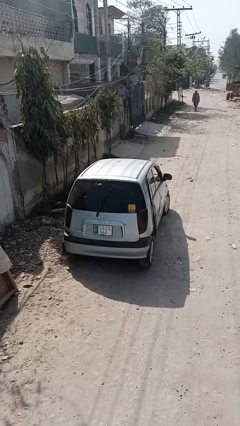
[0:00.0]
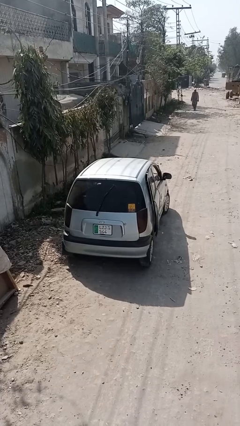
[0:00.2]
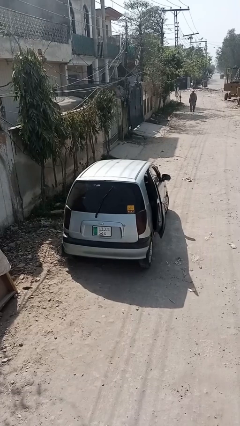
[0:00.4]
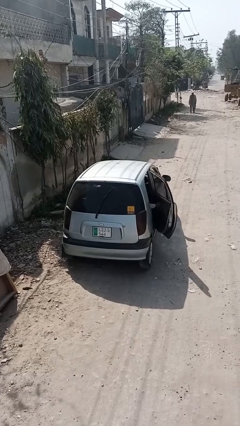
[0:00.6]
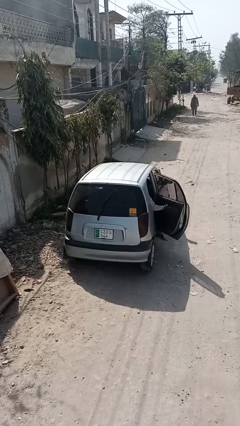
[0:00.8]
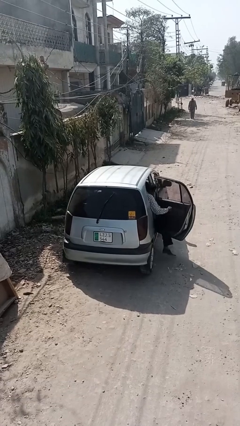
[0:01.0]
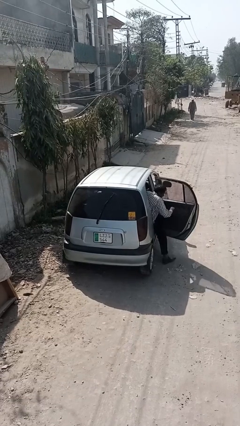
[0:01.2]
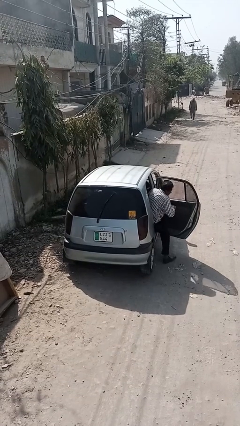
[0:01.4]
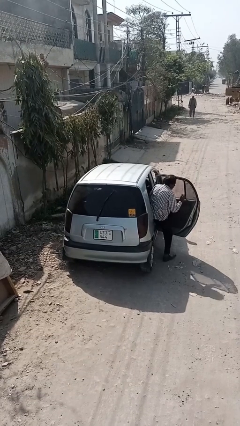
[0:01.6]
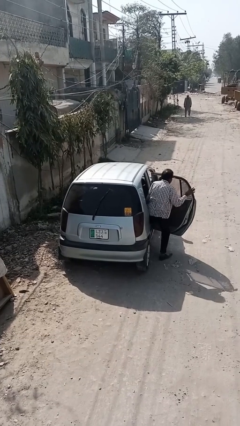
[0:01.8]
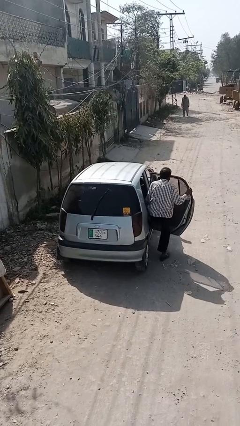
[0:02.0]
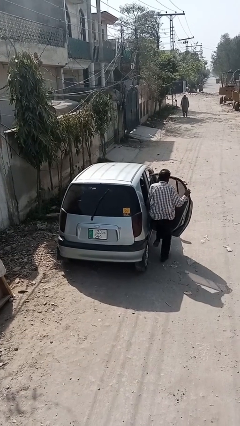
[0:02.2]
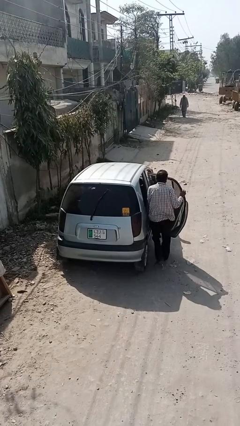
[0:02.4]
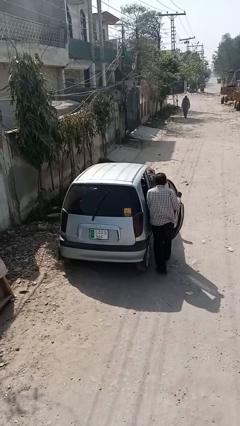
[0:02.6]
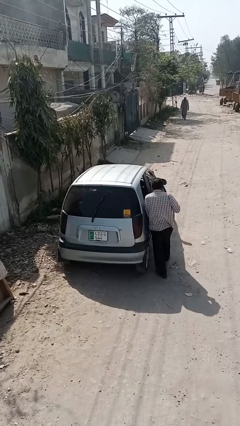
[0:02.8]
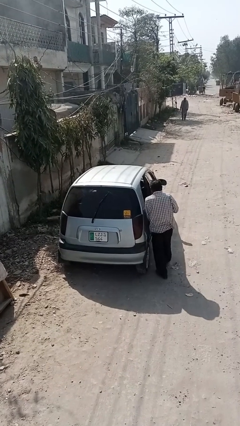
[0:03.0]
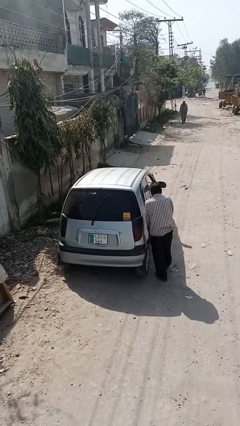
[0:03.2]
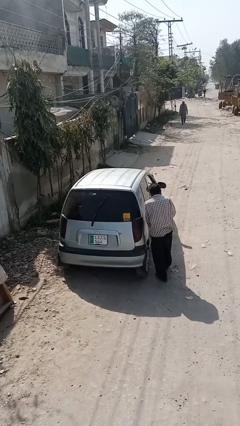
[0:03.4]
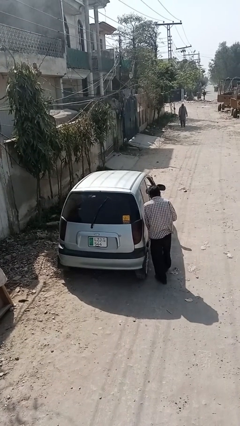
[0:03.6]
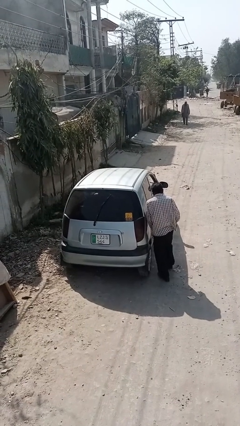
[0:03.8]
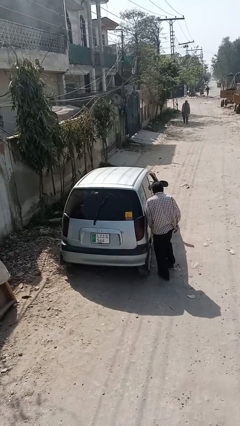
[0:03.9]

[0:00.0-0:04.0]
car drops off person

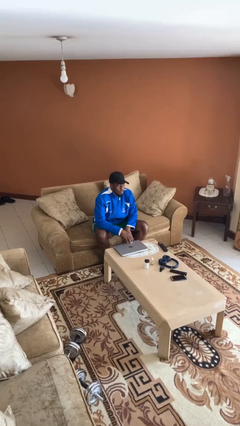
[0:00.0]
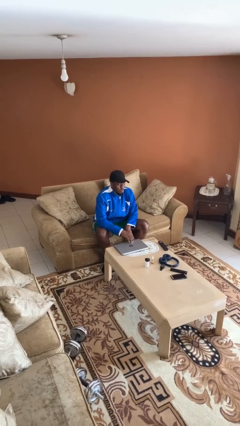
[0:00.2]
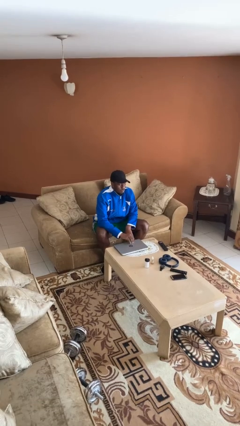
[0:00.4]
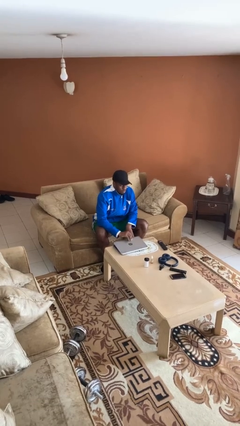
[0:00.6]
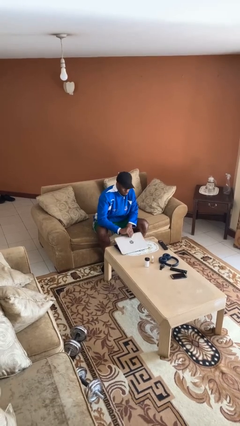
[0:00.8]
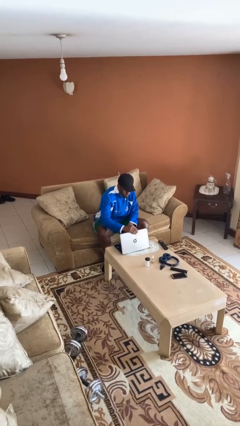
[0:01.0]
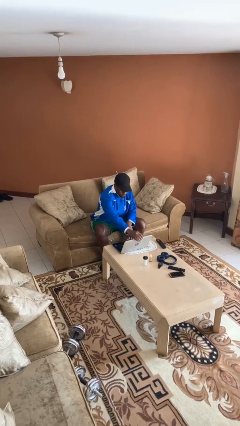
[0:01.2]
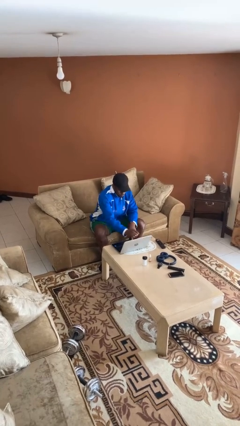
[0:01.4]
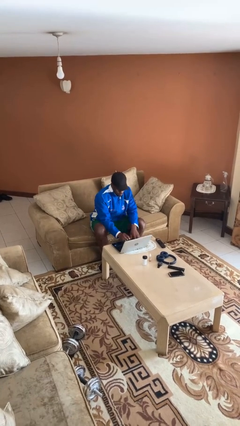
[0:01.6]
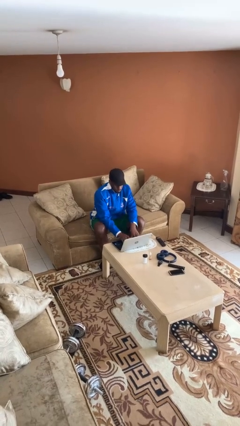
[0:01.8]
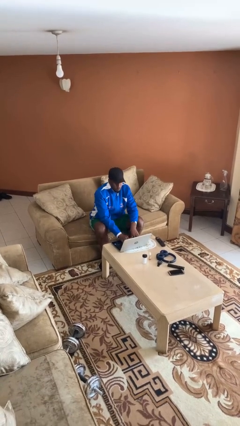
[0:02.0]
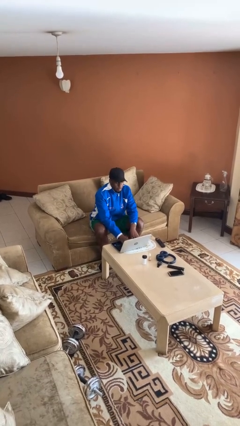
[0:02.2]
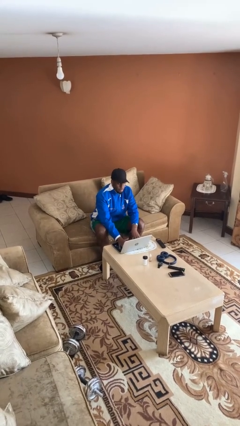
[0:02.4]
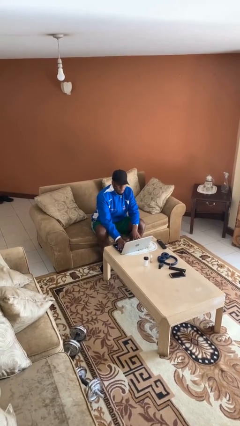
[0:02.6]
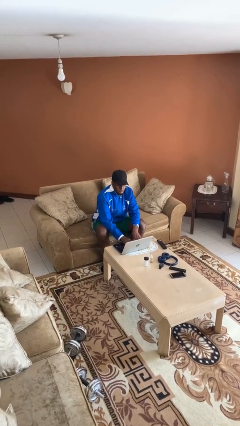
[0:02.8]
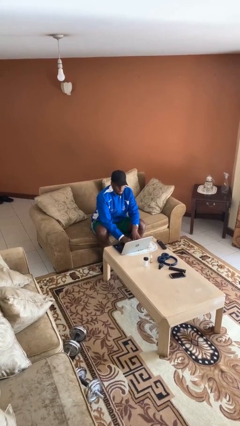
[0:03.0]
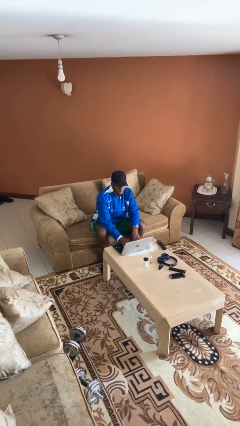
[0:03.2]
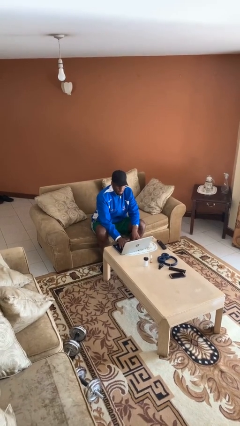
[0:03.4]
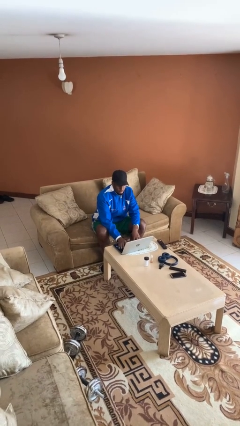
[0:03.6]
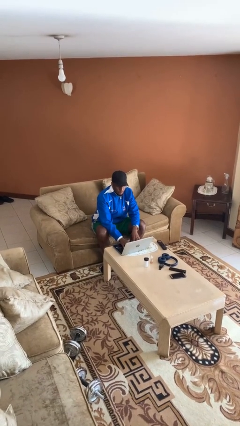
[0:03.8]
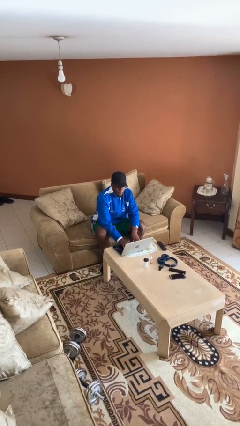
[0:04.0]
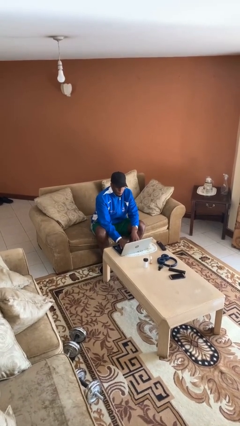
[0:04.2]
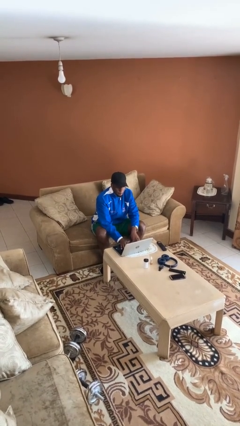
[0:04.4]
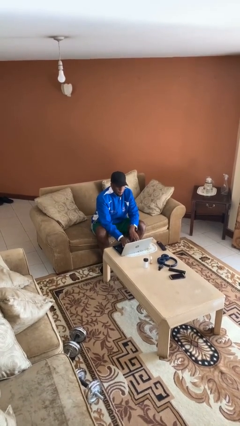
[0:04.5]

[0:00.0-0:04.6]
person interacts with laptop

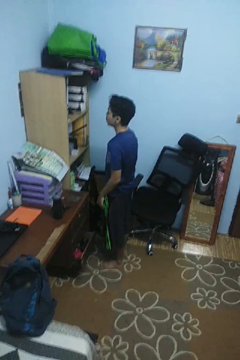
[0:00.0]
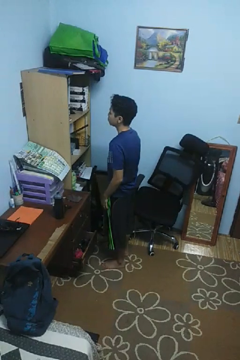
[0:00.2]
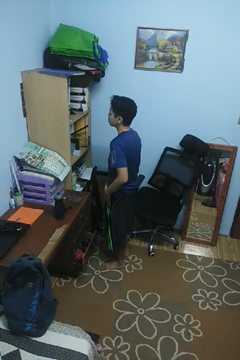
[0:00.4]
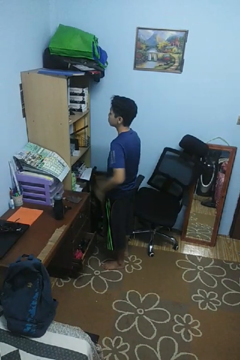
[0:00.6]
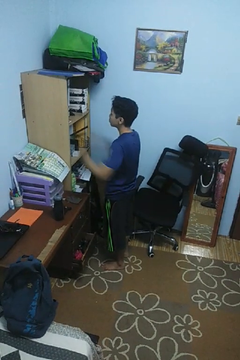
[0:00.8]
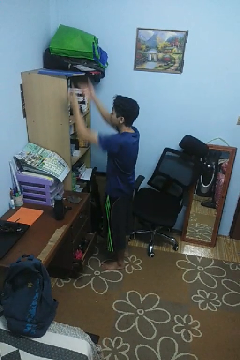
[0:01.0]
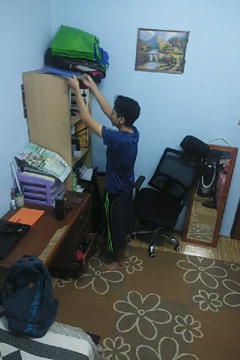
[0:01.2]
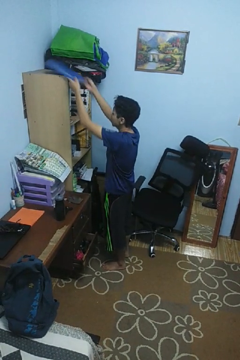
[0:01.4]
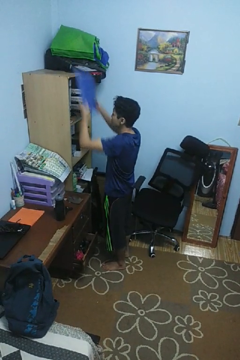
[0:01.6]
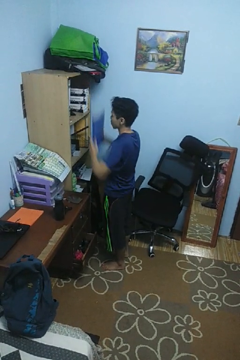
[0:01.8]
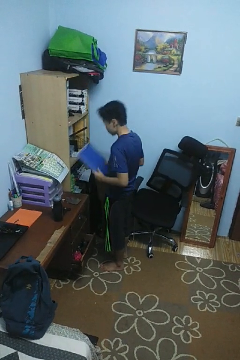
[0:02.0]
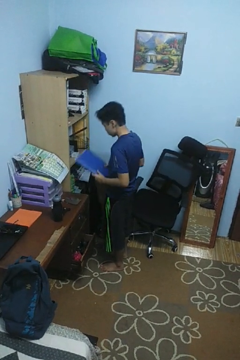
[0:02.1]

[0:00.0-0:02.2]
person picks up object from shelf

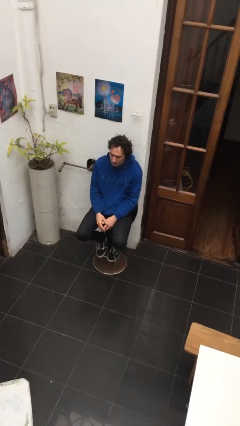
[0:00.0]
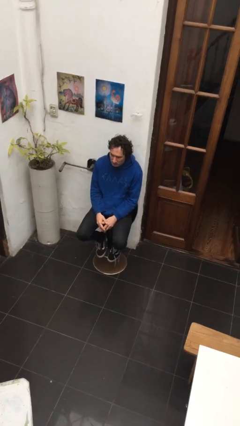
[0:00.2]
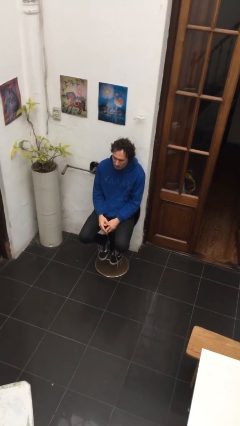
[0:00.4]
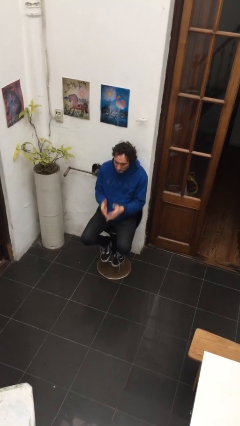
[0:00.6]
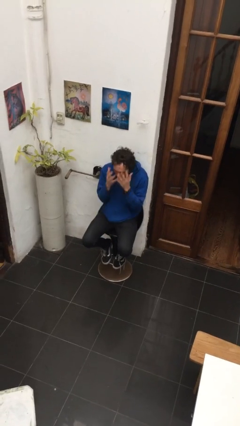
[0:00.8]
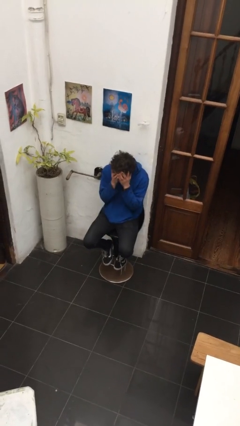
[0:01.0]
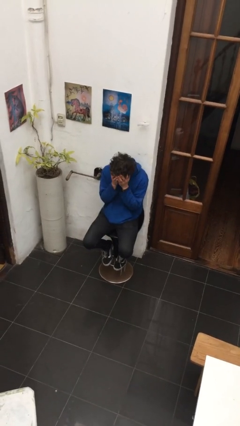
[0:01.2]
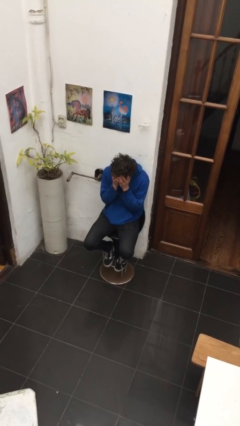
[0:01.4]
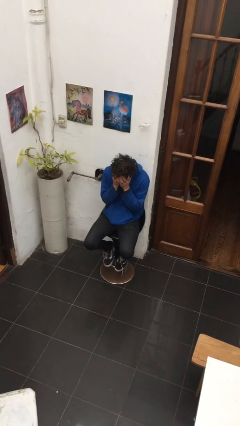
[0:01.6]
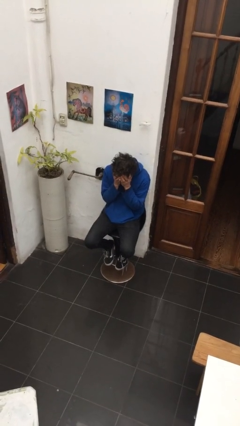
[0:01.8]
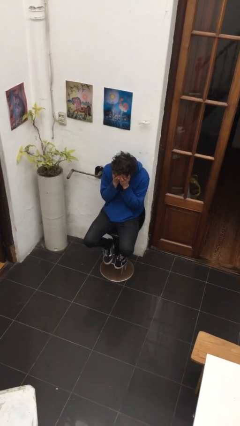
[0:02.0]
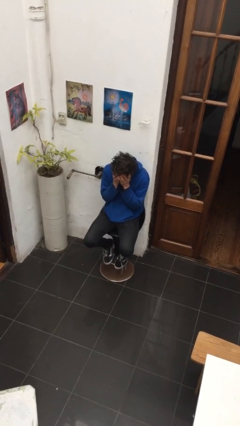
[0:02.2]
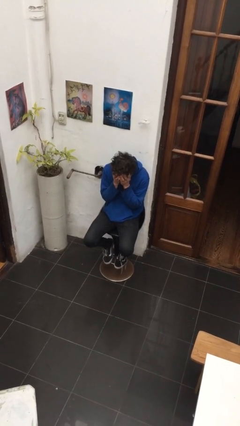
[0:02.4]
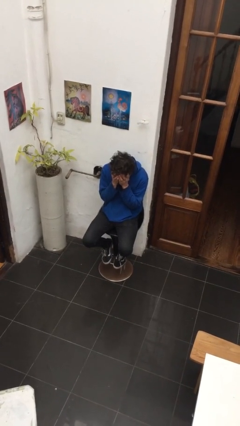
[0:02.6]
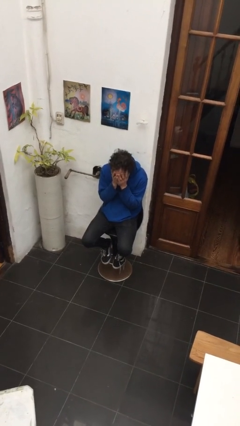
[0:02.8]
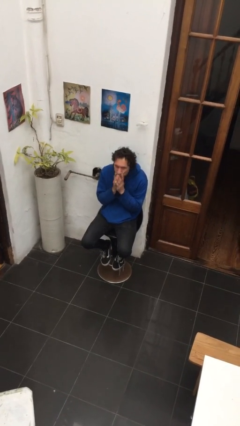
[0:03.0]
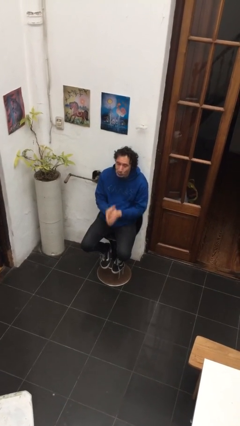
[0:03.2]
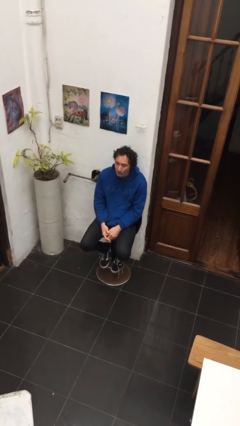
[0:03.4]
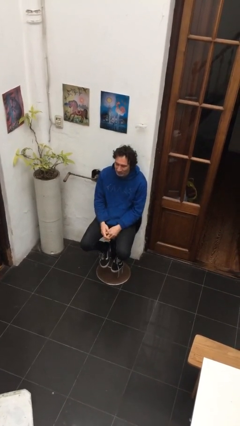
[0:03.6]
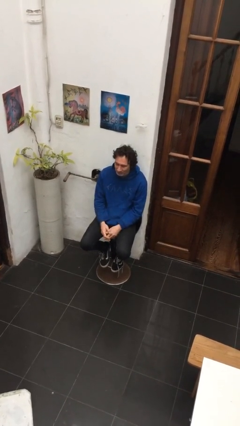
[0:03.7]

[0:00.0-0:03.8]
person covers face with hands

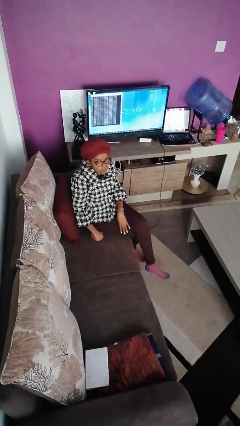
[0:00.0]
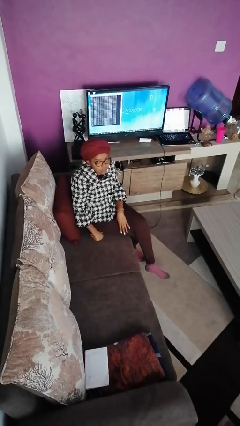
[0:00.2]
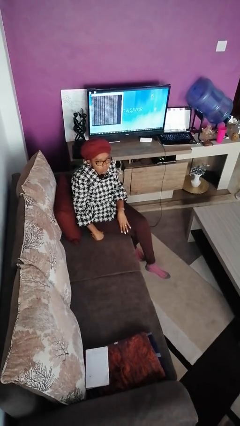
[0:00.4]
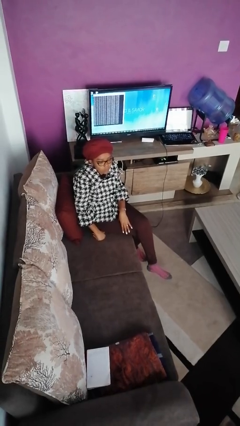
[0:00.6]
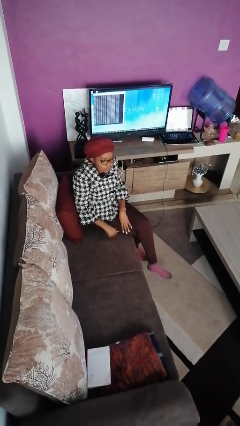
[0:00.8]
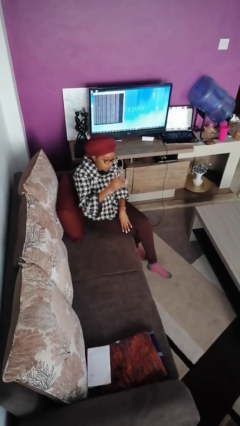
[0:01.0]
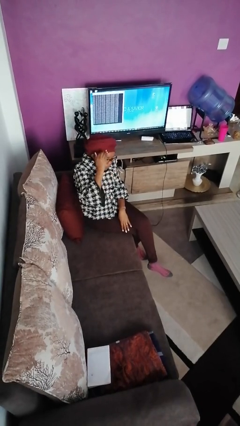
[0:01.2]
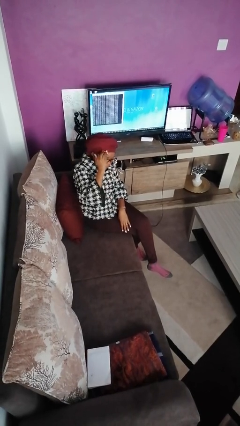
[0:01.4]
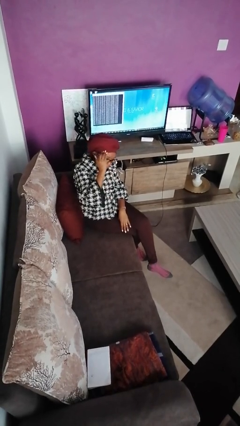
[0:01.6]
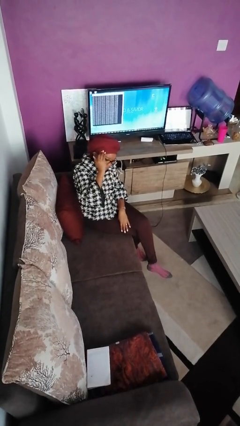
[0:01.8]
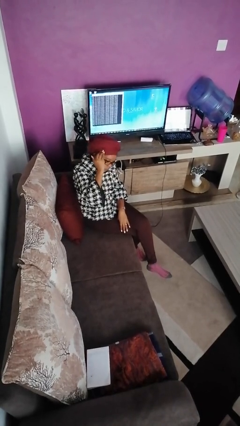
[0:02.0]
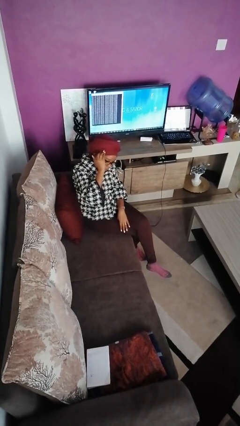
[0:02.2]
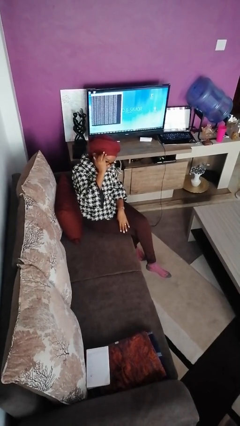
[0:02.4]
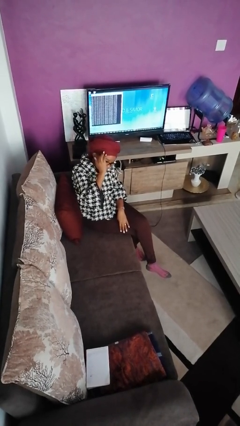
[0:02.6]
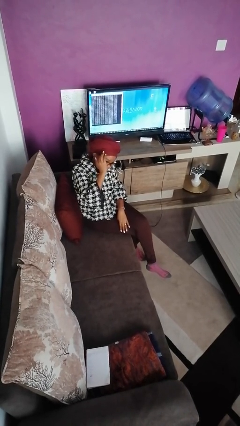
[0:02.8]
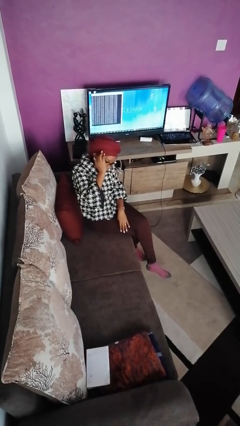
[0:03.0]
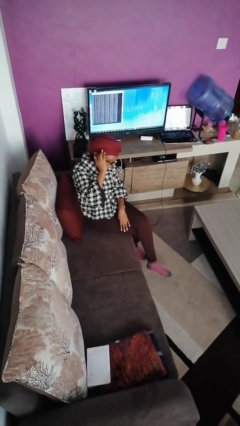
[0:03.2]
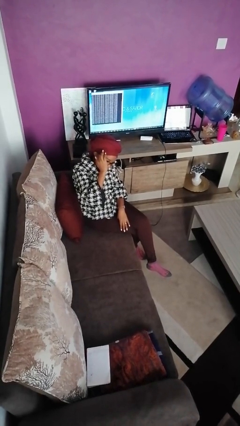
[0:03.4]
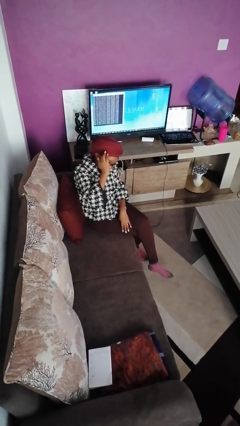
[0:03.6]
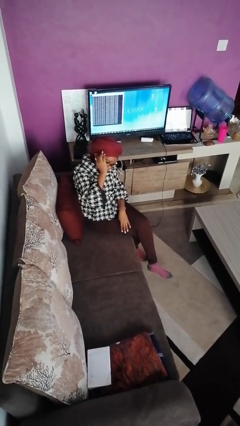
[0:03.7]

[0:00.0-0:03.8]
person scratches face

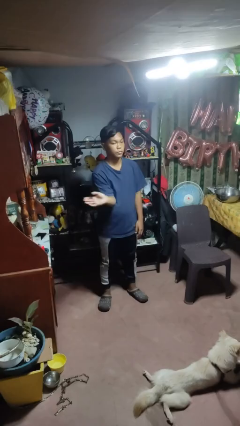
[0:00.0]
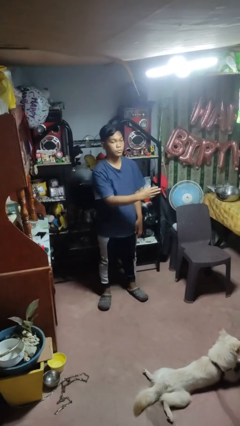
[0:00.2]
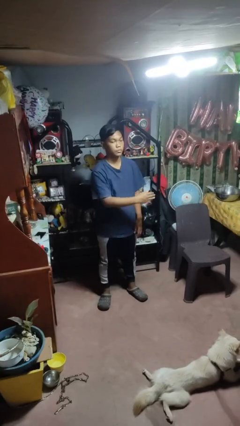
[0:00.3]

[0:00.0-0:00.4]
person gestures swipe left
